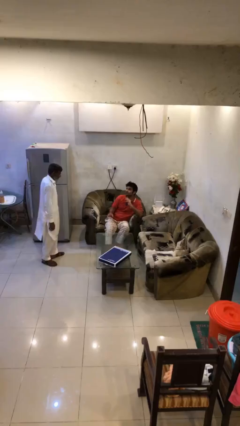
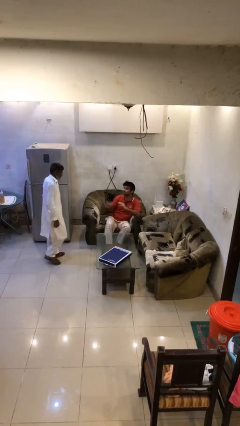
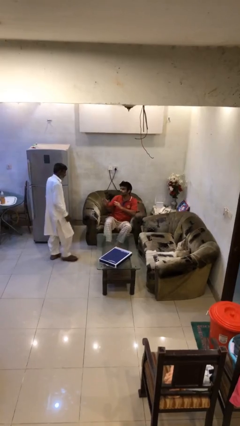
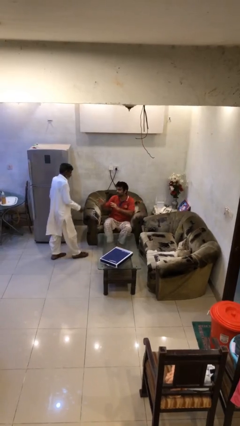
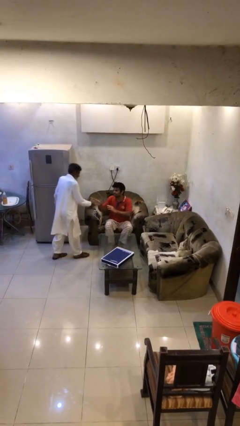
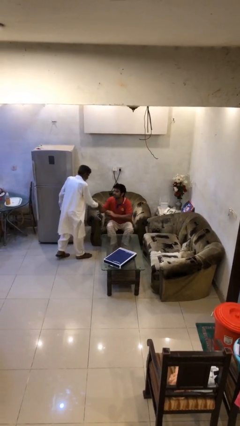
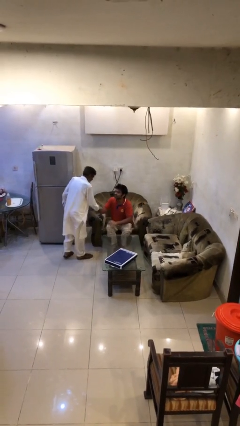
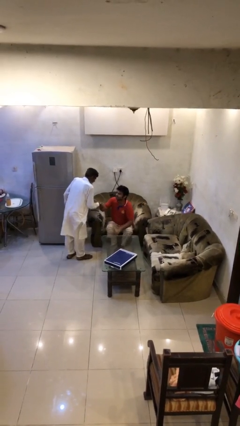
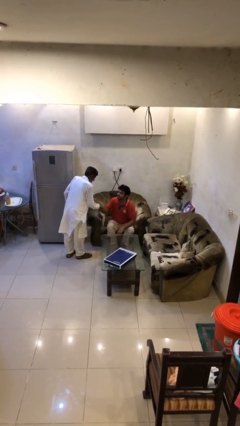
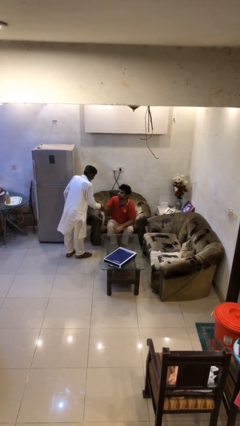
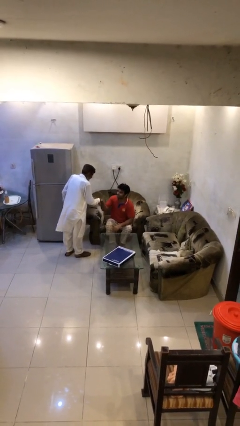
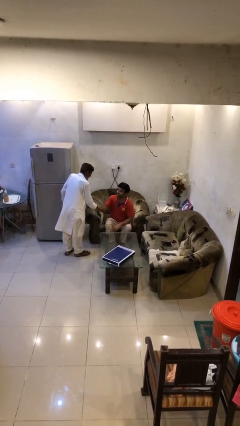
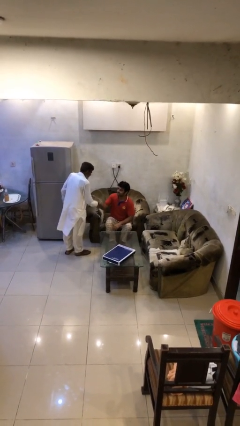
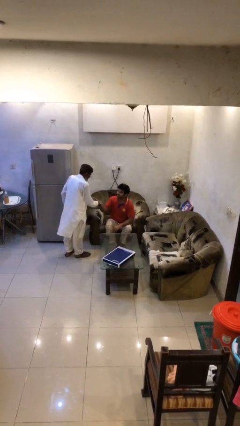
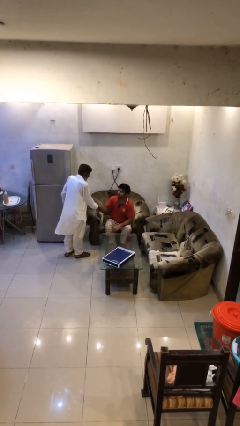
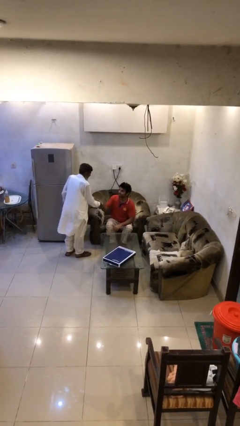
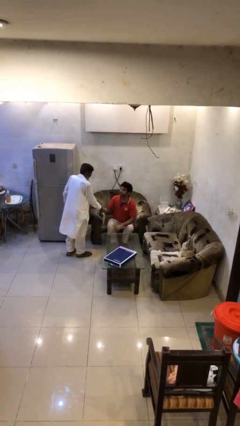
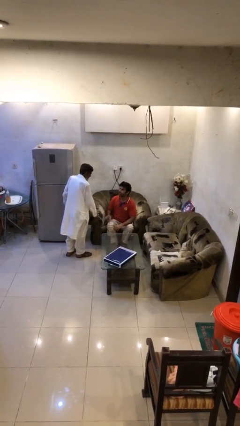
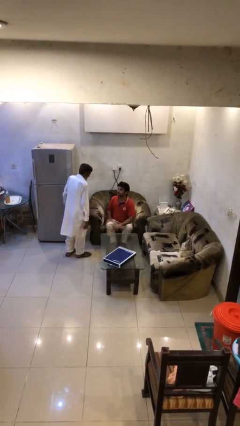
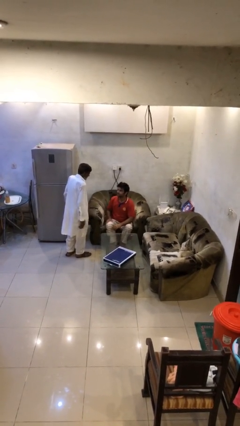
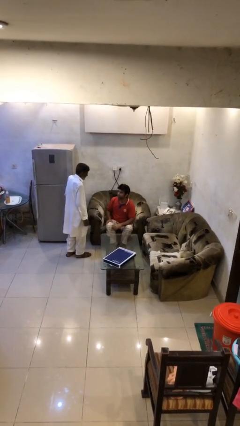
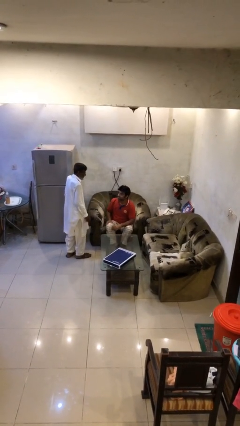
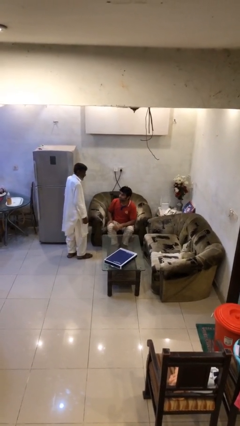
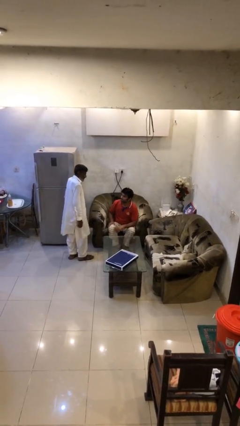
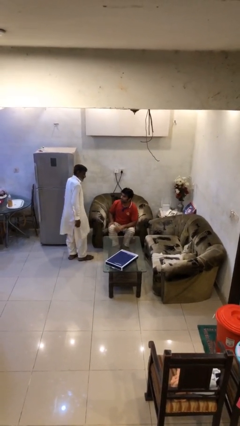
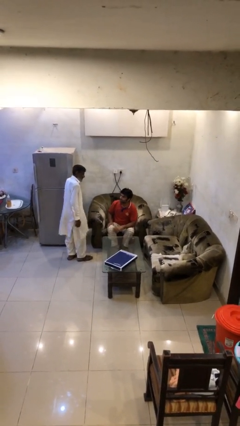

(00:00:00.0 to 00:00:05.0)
person shakes hand

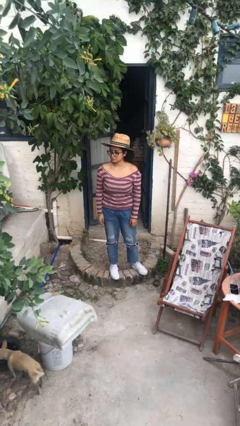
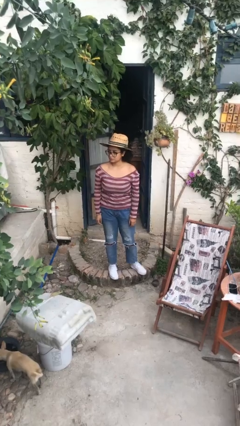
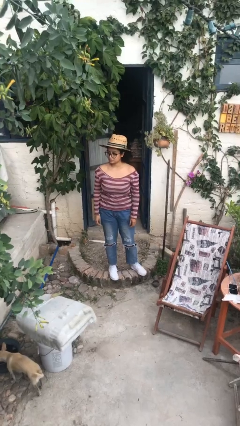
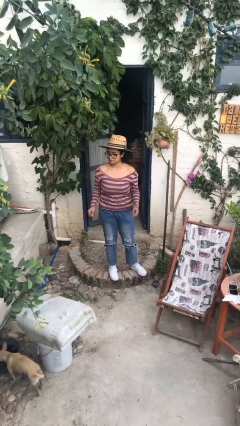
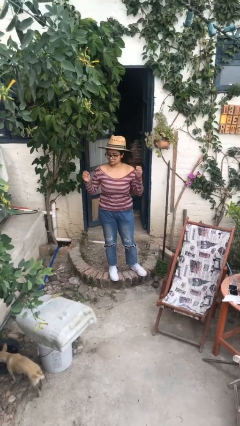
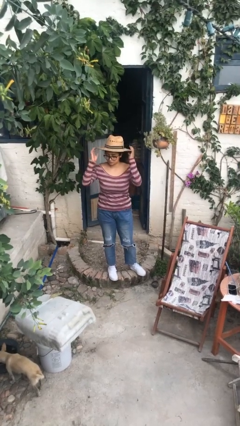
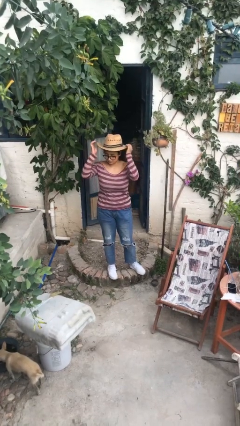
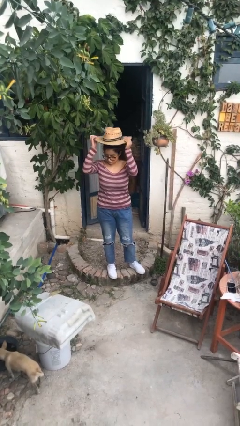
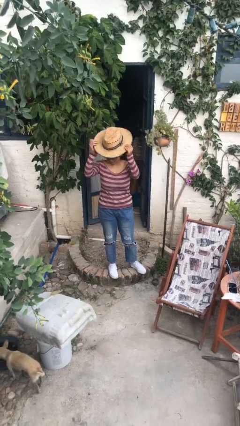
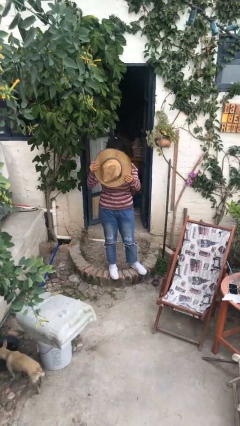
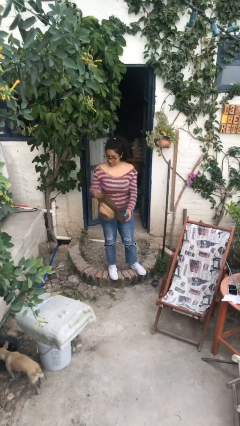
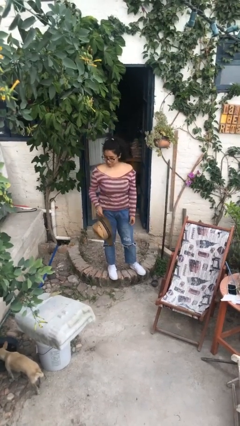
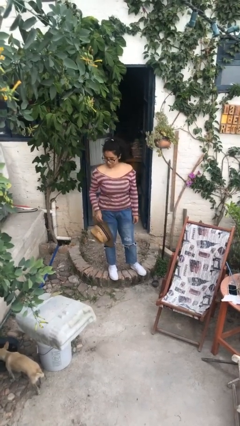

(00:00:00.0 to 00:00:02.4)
person takes off hat

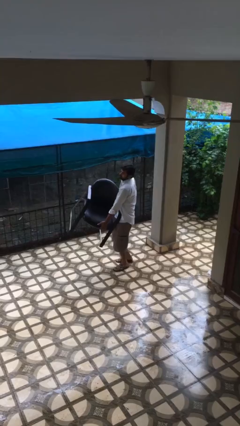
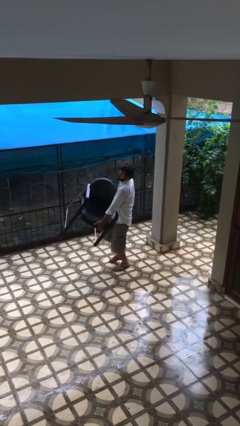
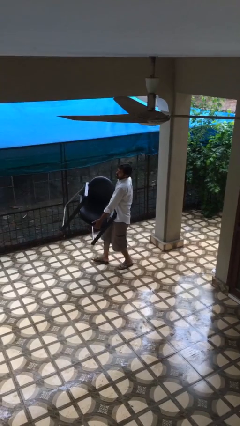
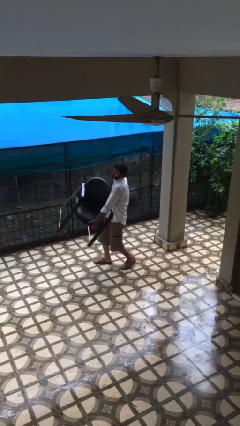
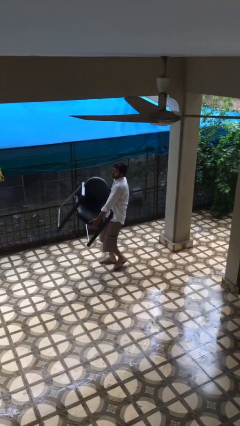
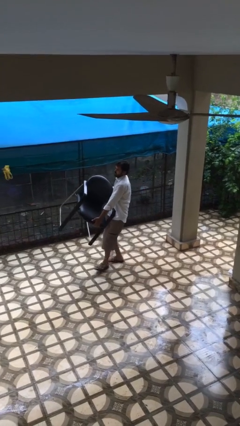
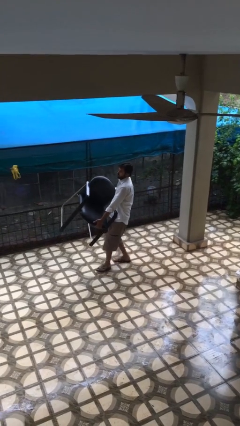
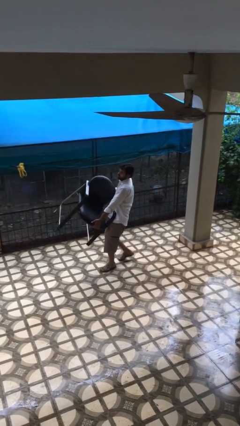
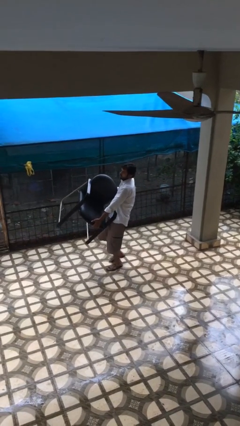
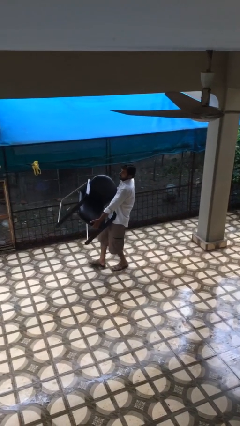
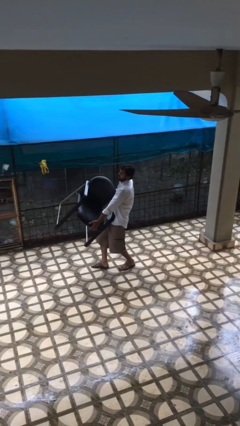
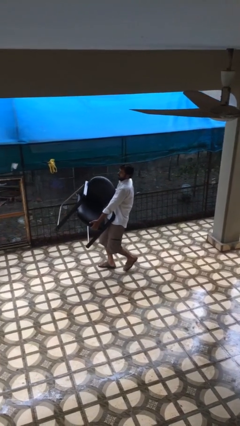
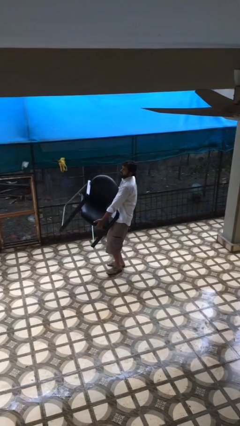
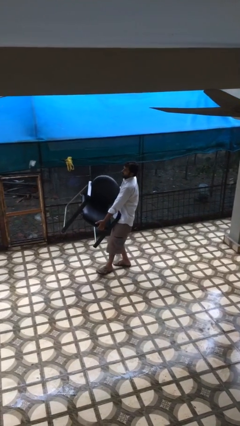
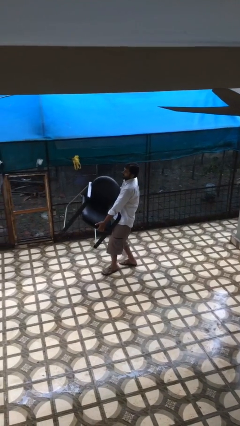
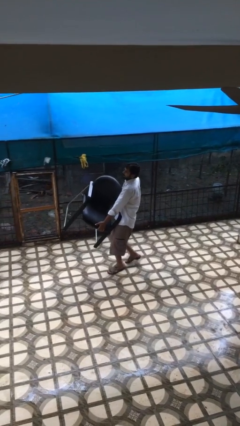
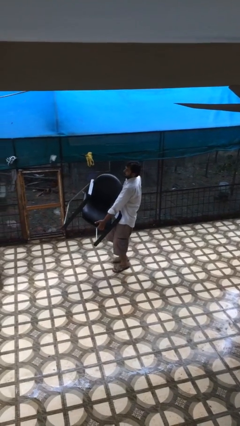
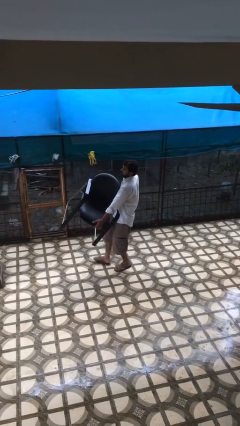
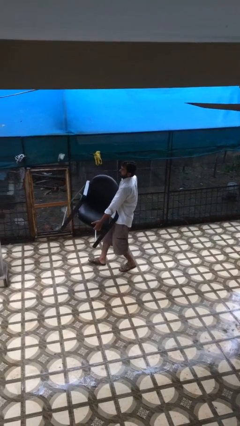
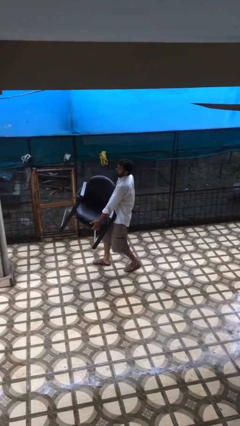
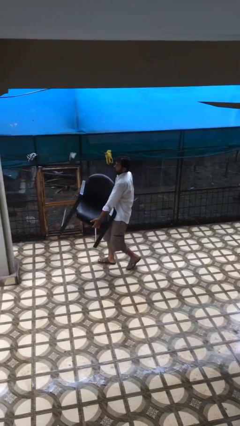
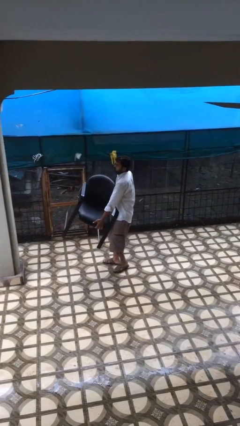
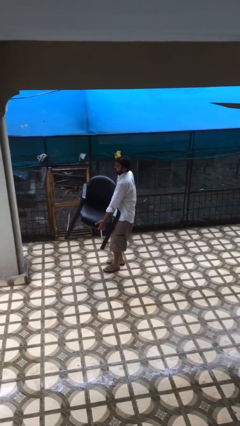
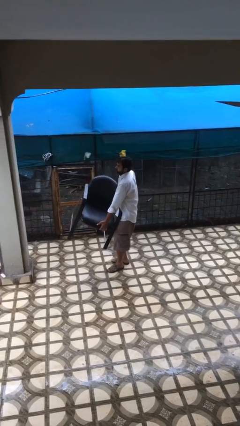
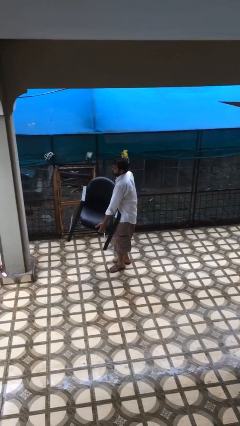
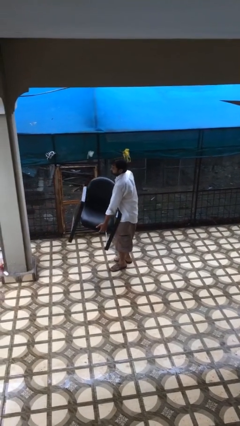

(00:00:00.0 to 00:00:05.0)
person carries heavy object

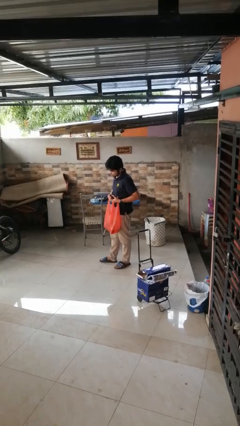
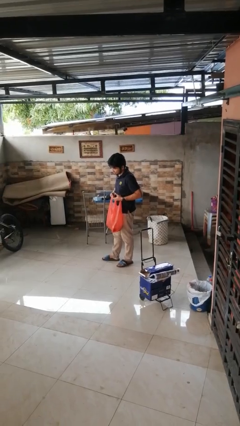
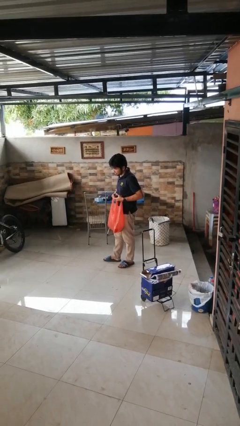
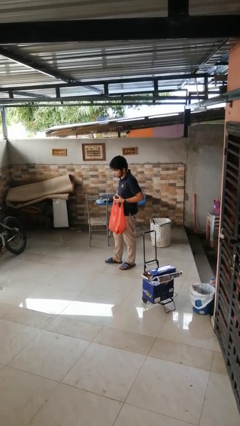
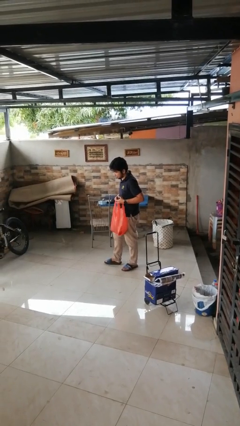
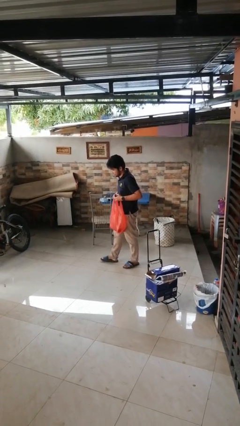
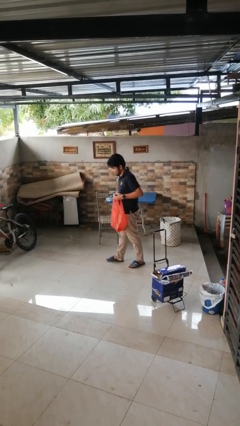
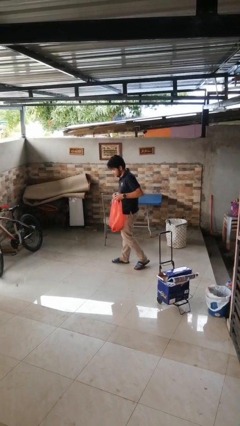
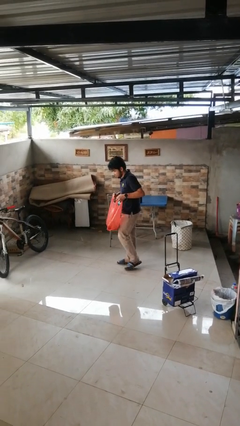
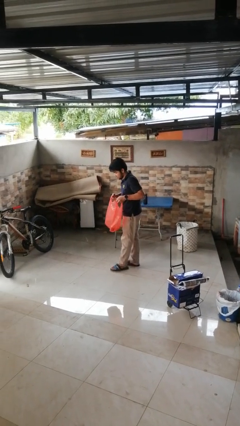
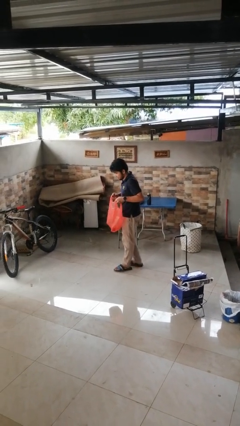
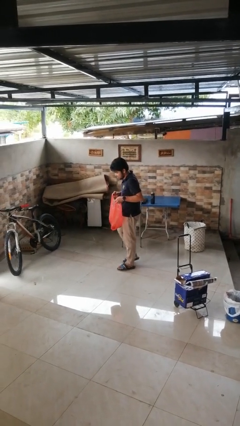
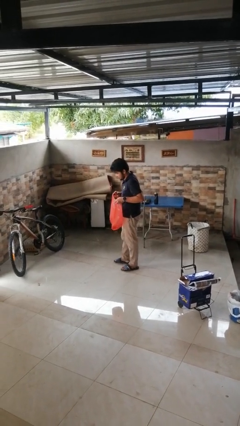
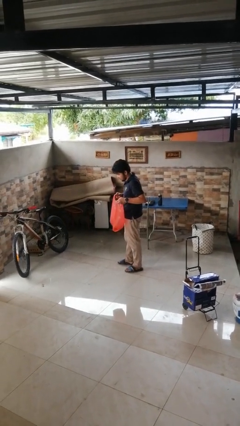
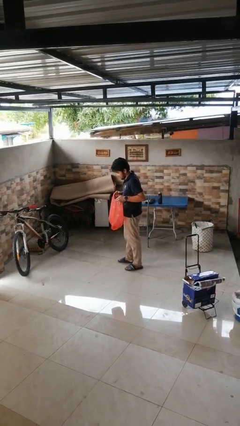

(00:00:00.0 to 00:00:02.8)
person carries groceries

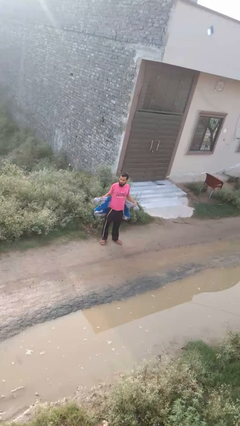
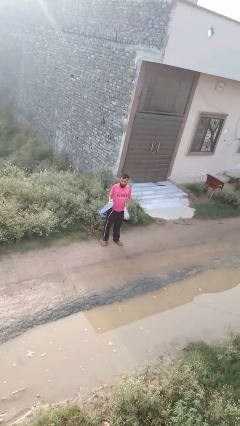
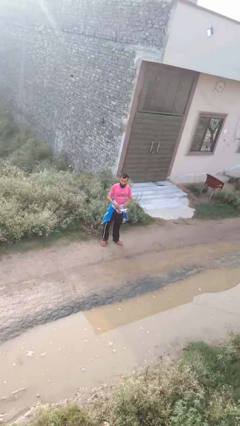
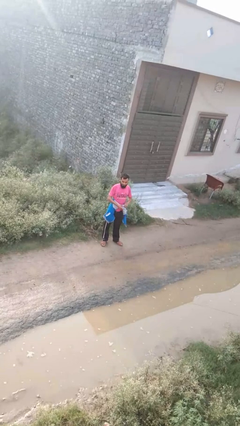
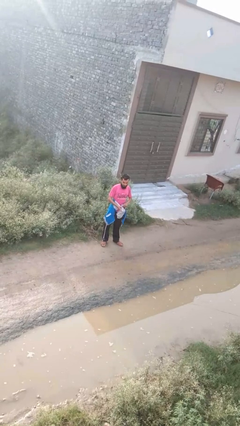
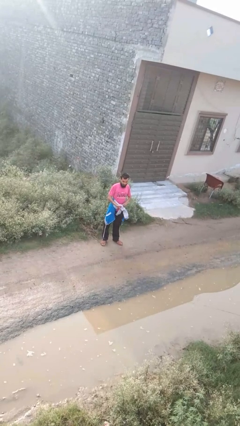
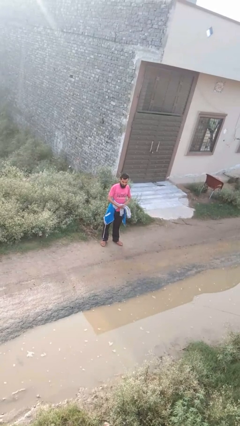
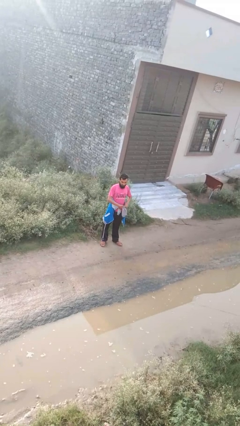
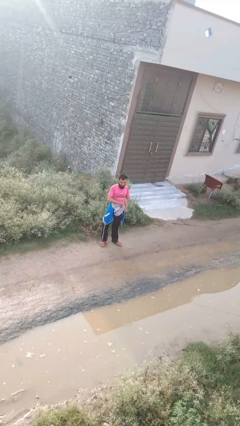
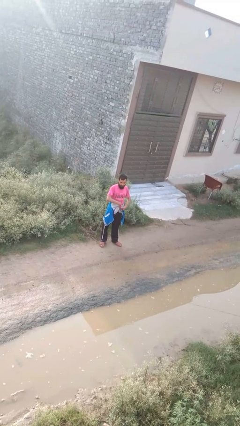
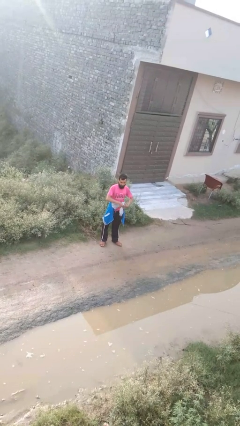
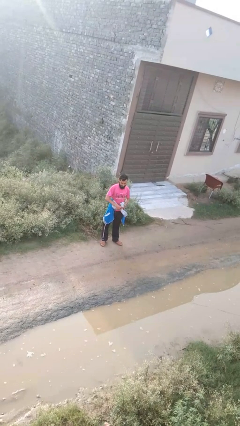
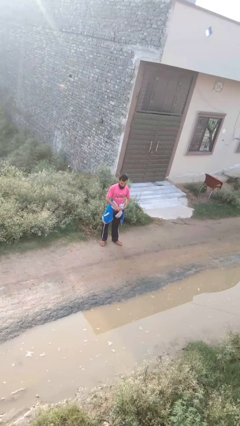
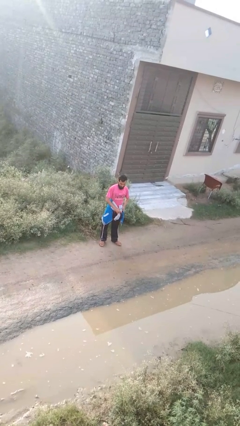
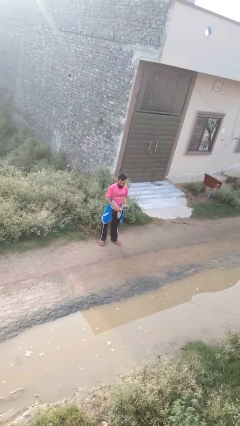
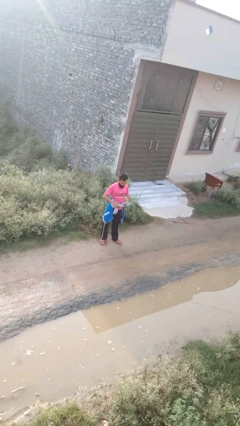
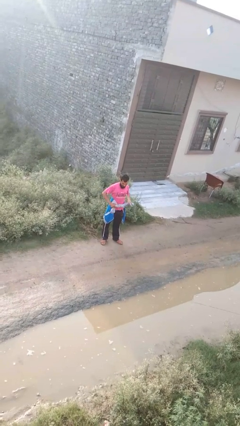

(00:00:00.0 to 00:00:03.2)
person ties jacket around waist
